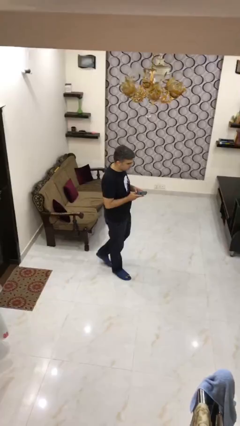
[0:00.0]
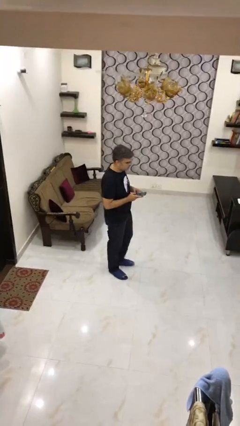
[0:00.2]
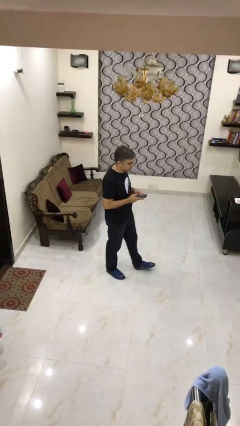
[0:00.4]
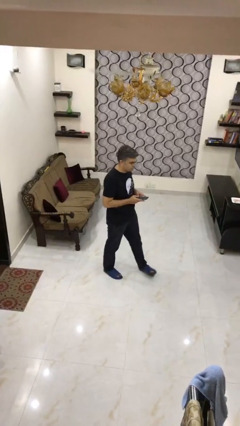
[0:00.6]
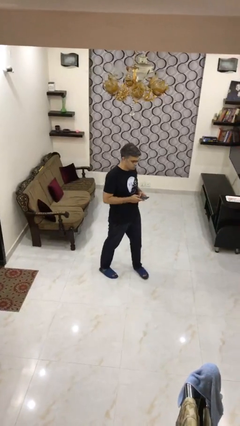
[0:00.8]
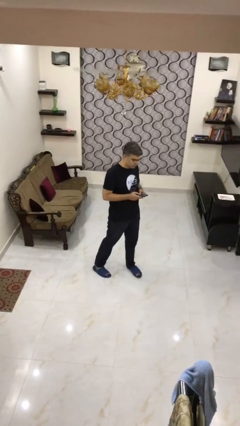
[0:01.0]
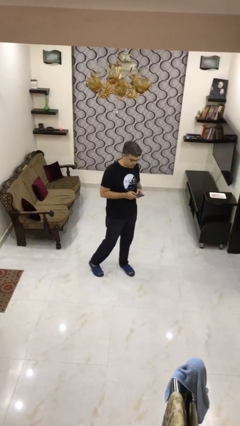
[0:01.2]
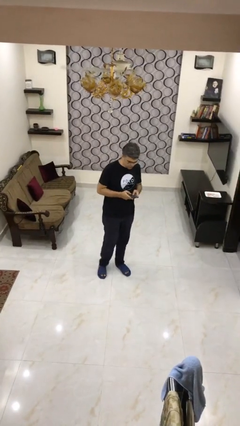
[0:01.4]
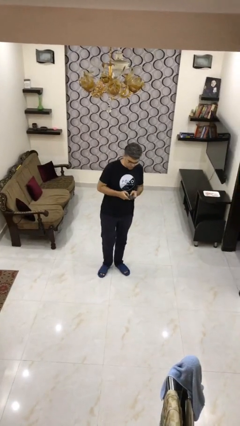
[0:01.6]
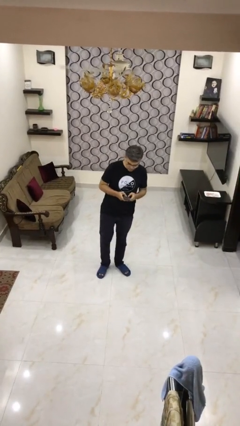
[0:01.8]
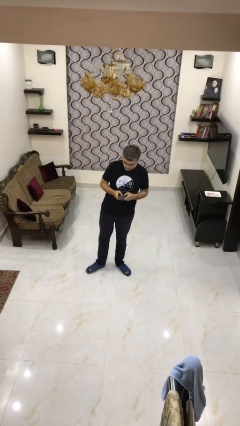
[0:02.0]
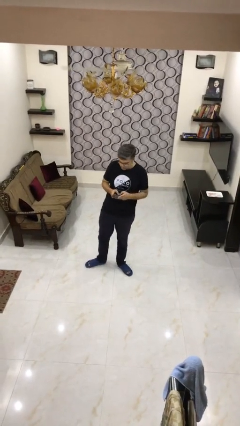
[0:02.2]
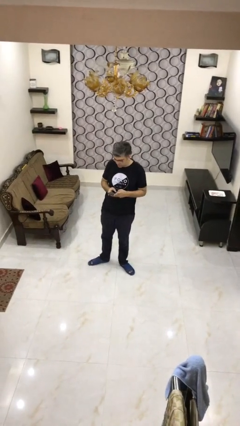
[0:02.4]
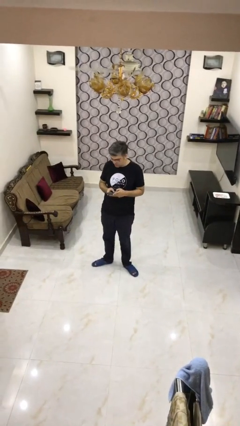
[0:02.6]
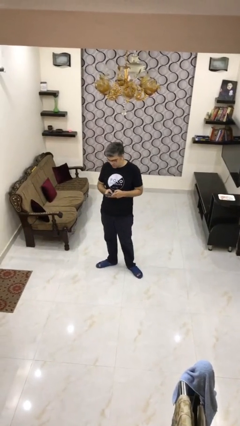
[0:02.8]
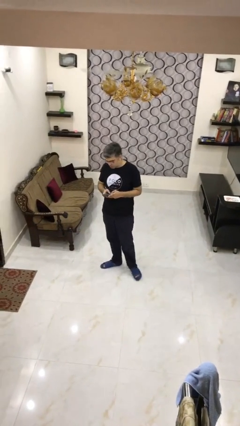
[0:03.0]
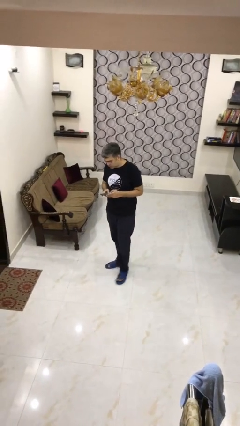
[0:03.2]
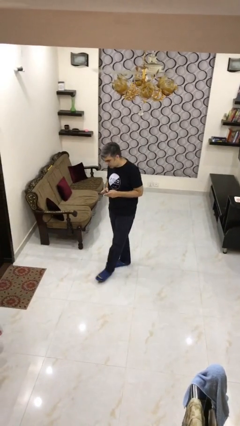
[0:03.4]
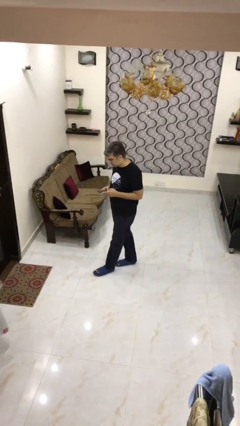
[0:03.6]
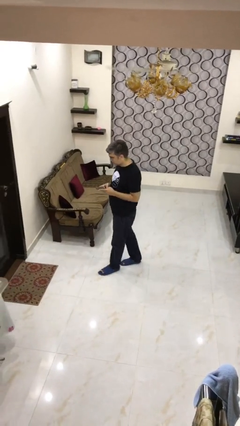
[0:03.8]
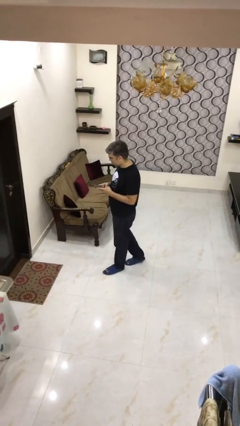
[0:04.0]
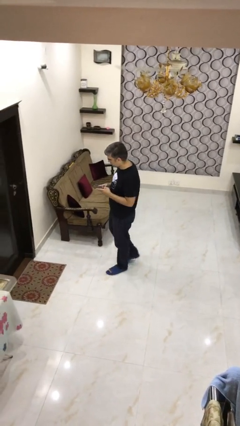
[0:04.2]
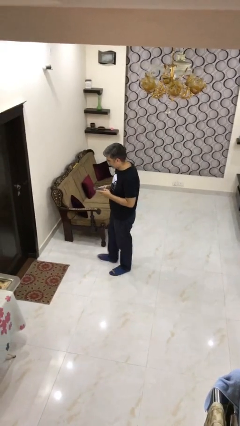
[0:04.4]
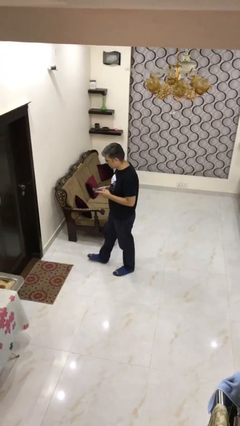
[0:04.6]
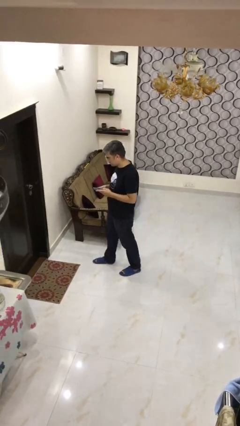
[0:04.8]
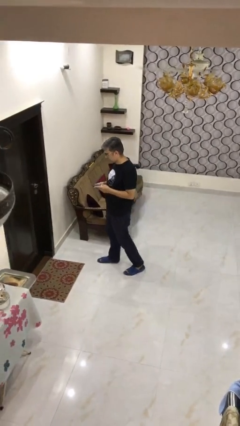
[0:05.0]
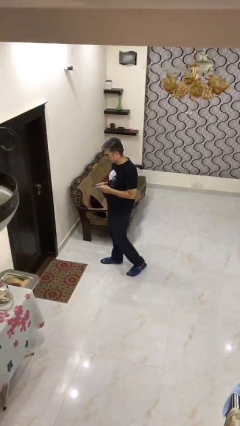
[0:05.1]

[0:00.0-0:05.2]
person texts on phone

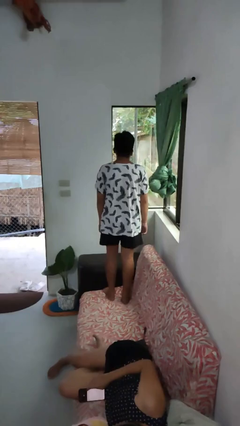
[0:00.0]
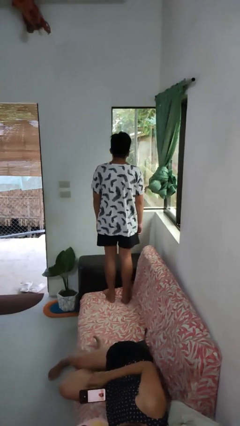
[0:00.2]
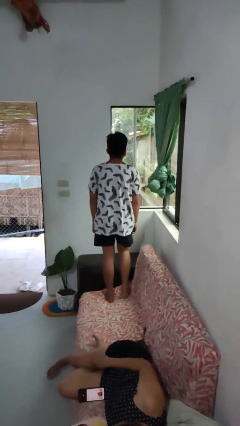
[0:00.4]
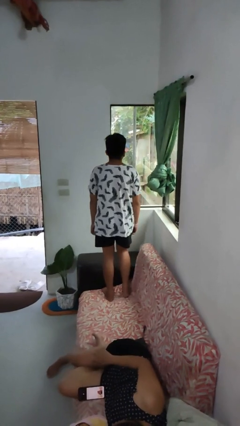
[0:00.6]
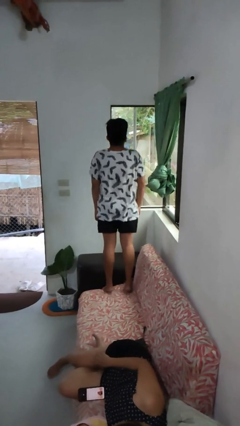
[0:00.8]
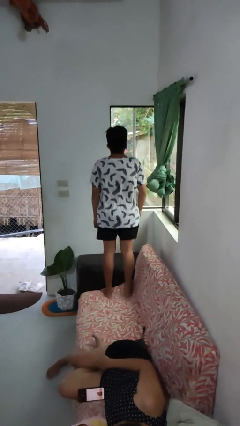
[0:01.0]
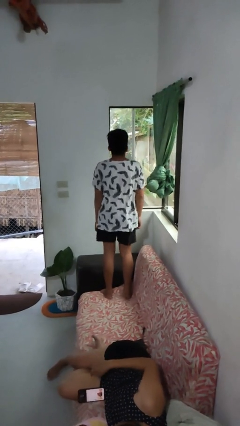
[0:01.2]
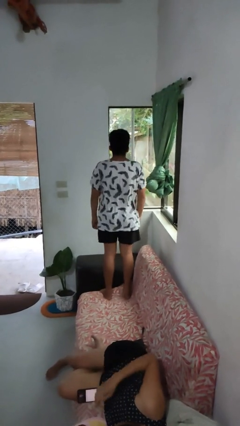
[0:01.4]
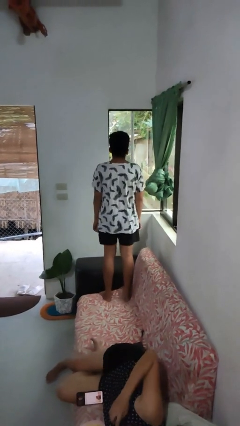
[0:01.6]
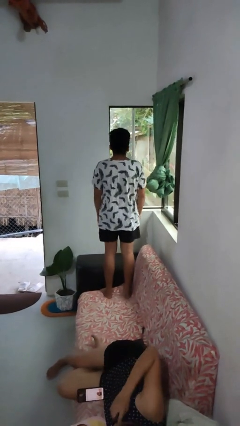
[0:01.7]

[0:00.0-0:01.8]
person jumps on couch

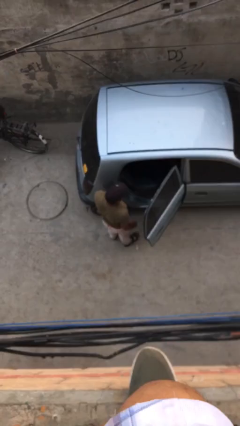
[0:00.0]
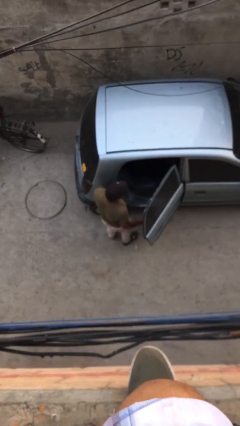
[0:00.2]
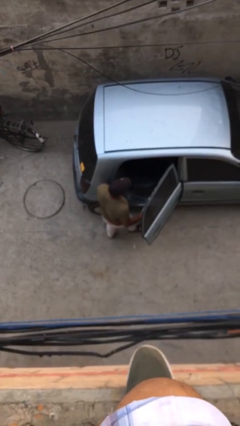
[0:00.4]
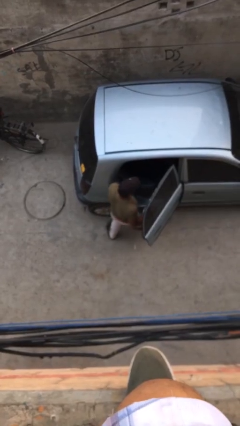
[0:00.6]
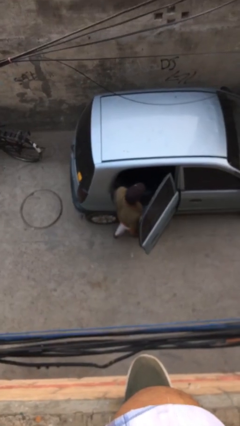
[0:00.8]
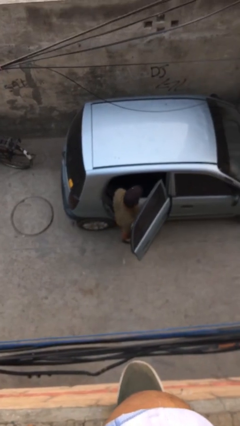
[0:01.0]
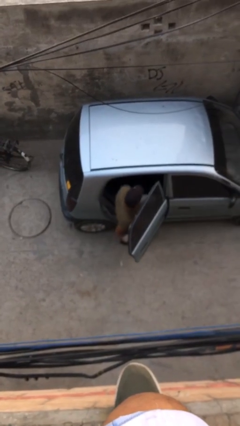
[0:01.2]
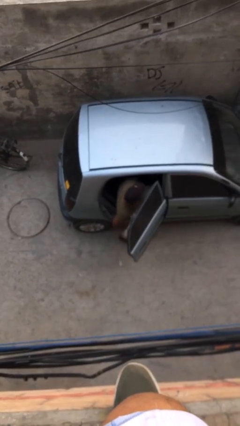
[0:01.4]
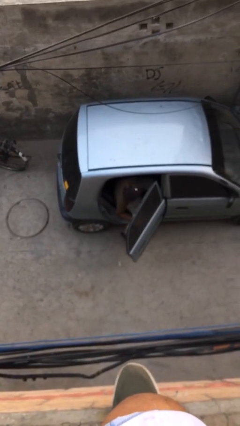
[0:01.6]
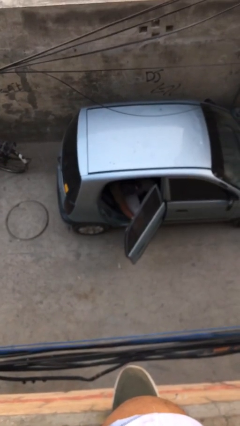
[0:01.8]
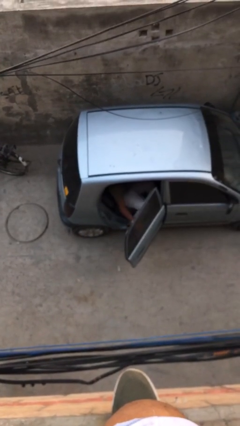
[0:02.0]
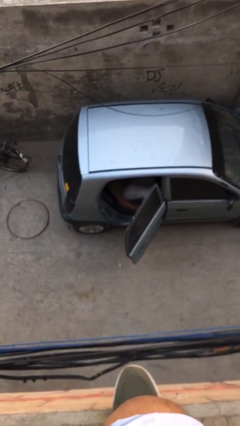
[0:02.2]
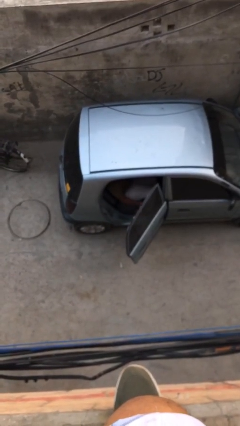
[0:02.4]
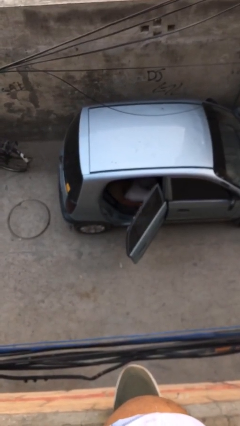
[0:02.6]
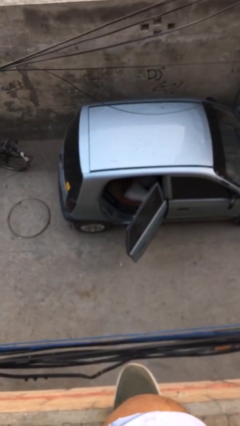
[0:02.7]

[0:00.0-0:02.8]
person enters car

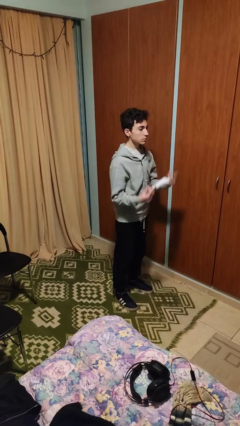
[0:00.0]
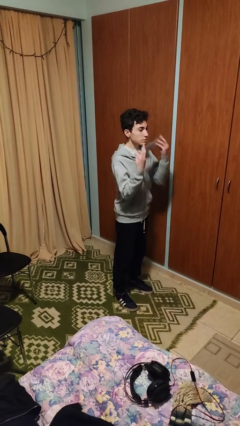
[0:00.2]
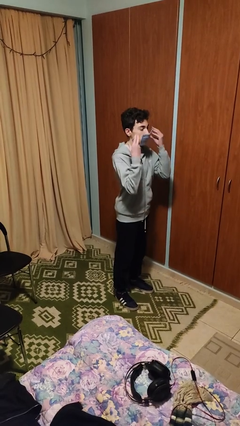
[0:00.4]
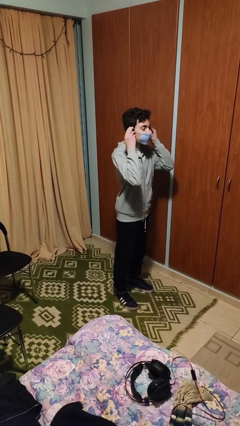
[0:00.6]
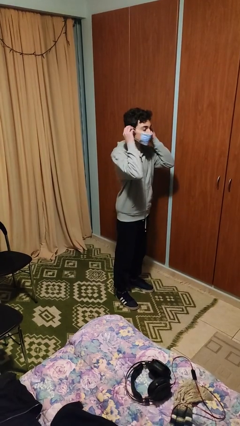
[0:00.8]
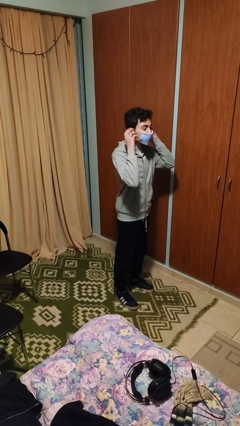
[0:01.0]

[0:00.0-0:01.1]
person puts on facemask

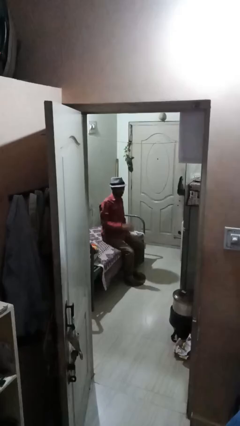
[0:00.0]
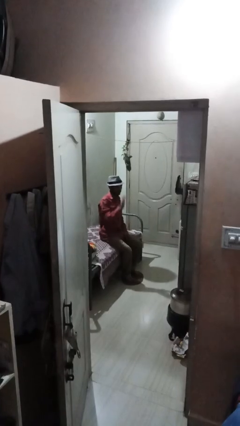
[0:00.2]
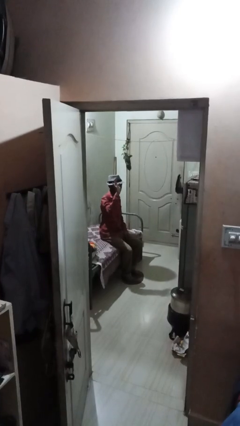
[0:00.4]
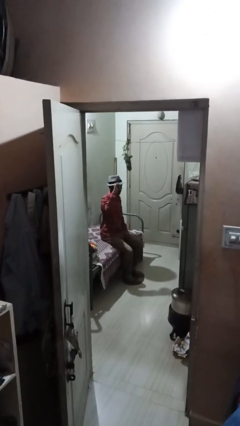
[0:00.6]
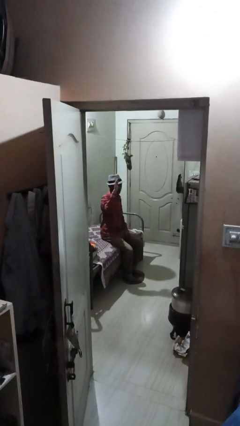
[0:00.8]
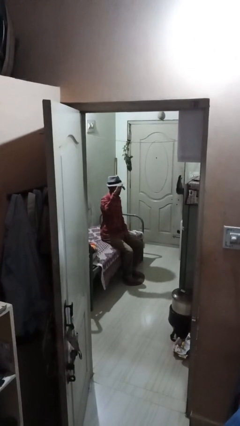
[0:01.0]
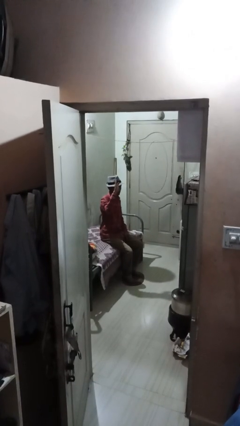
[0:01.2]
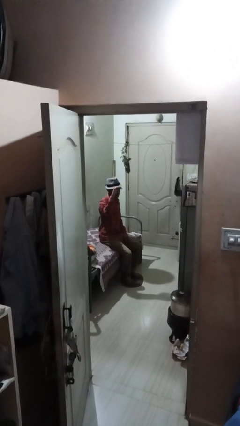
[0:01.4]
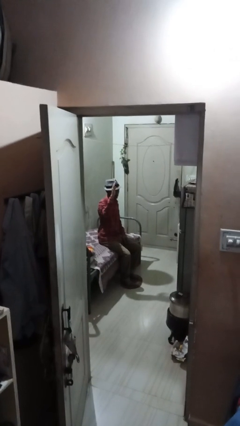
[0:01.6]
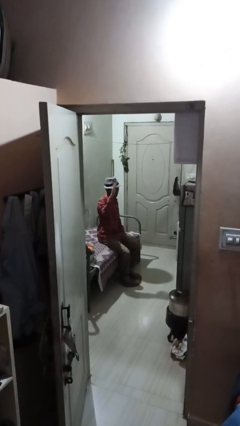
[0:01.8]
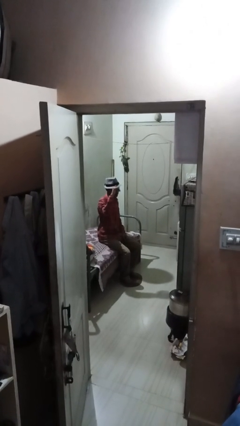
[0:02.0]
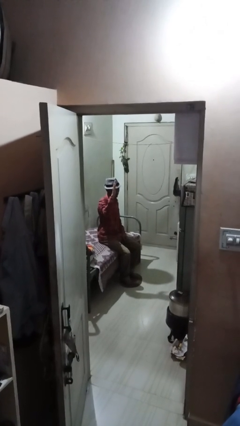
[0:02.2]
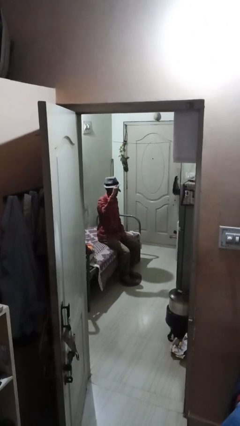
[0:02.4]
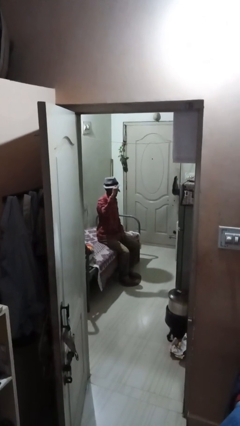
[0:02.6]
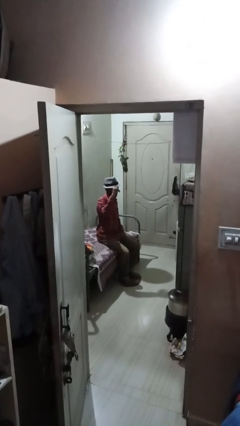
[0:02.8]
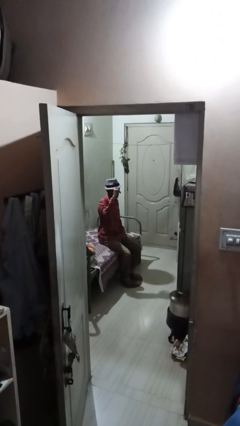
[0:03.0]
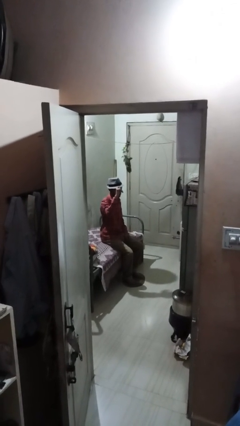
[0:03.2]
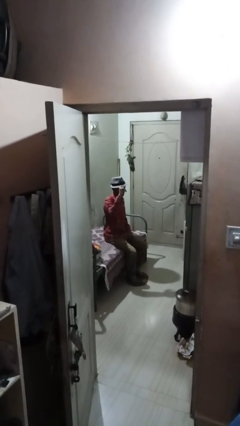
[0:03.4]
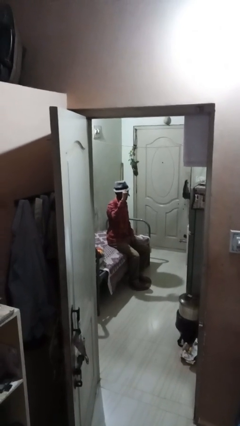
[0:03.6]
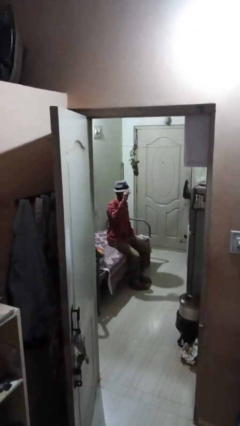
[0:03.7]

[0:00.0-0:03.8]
person gestures come here

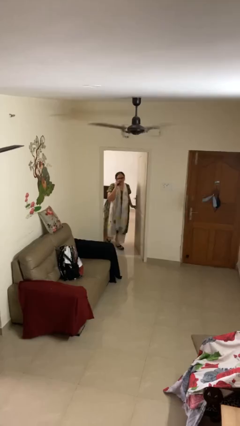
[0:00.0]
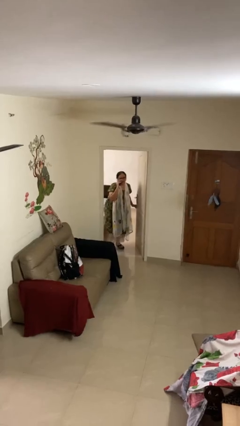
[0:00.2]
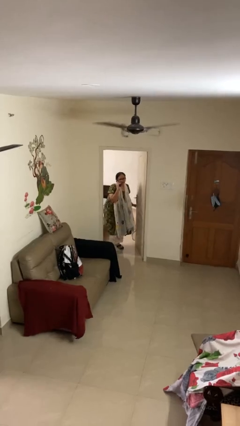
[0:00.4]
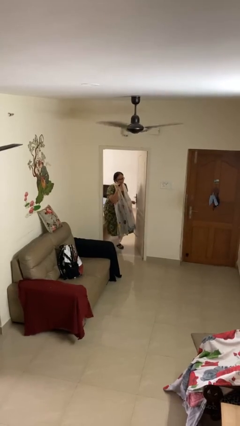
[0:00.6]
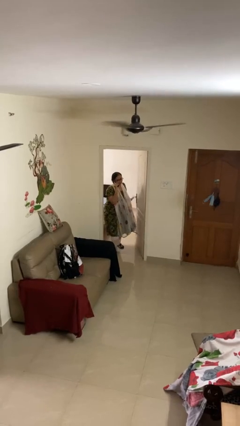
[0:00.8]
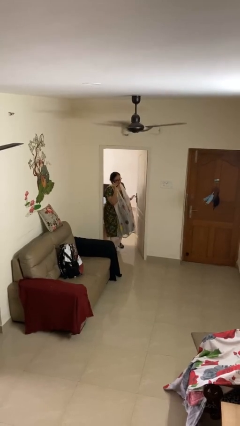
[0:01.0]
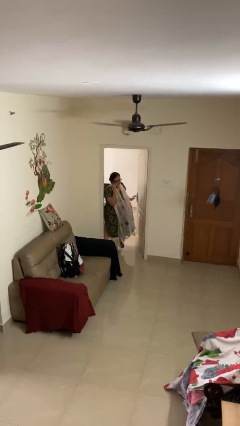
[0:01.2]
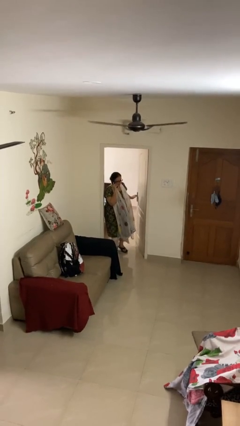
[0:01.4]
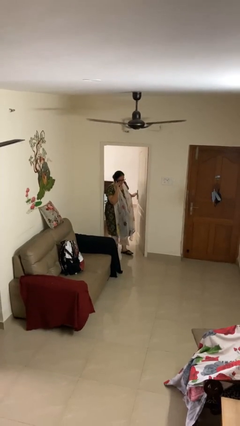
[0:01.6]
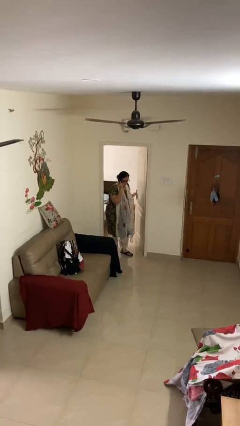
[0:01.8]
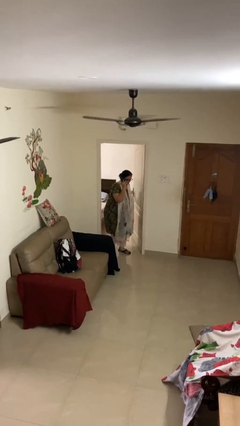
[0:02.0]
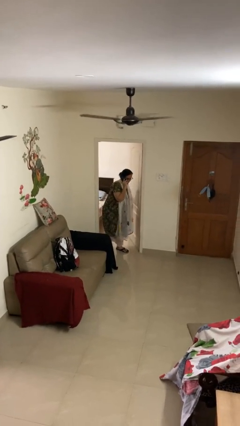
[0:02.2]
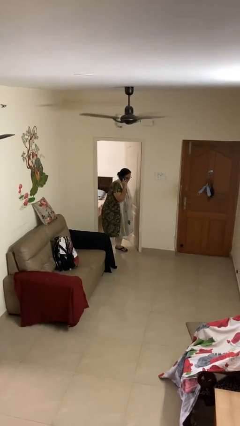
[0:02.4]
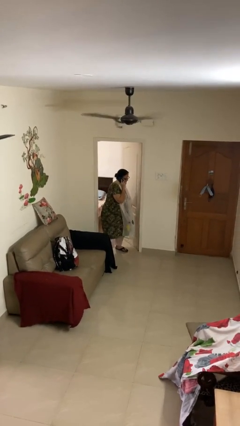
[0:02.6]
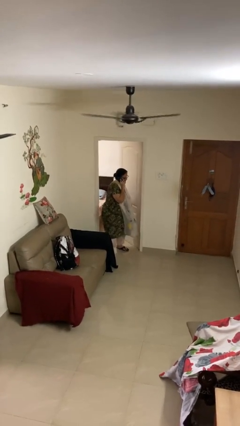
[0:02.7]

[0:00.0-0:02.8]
person enters scene through structure
